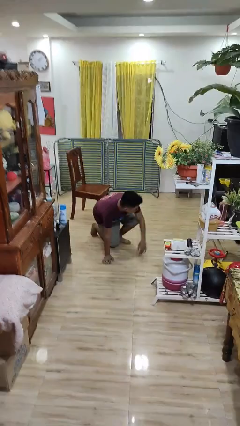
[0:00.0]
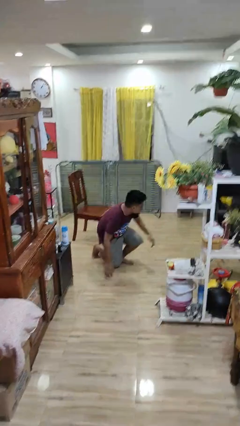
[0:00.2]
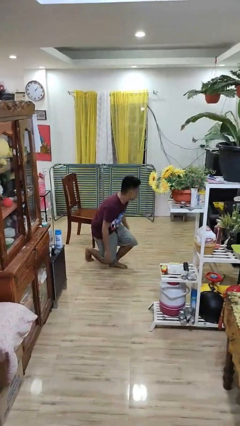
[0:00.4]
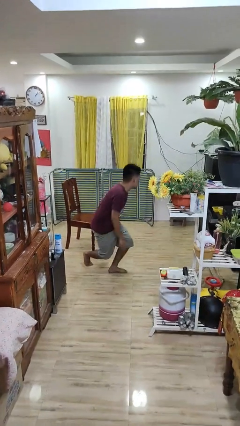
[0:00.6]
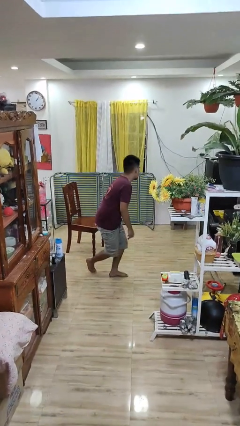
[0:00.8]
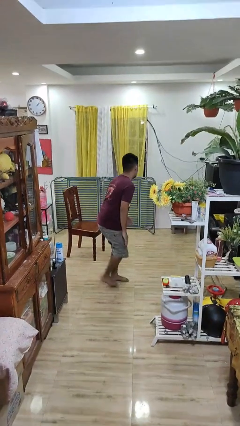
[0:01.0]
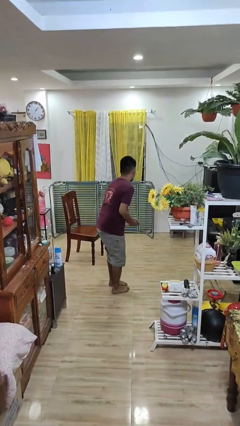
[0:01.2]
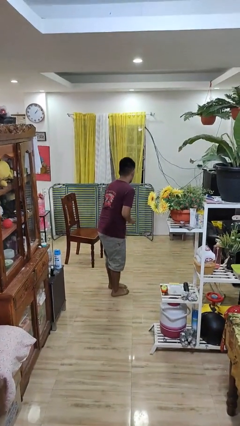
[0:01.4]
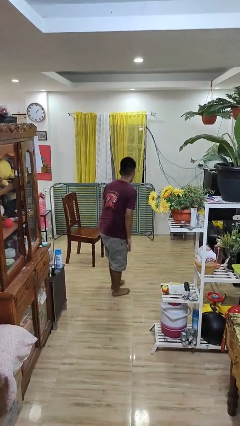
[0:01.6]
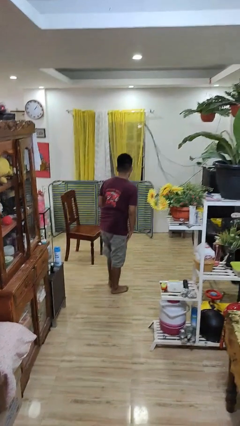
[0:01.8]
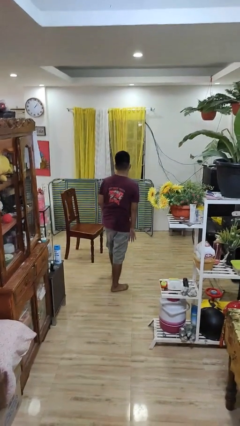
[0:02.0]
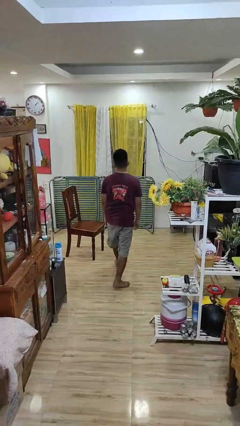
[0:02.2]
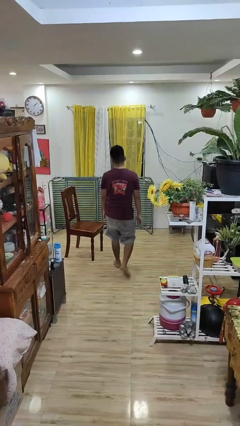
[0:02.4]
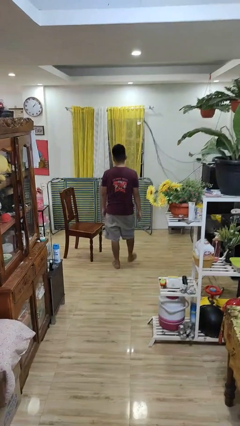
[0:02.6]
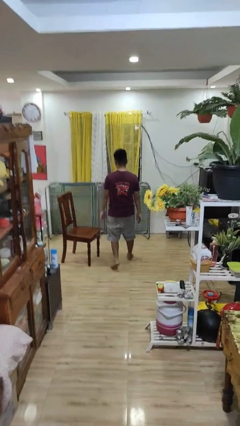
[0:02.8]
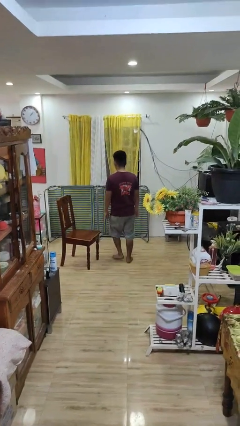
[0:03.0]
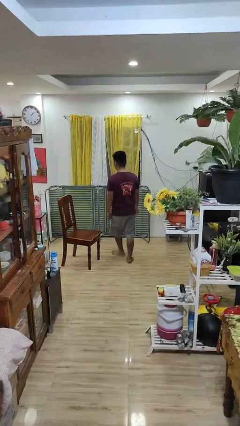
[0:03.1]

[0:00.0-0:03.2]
person stands up from floor

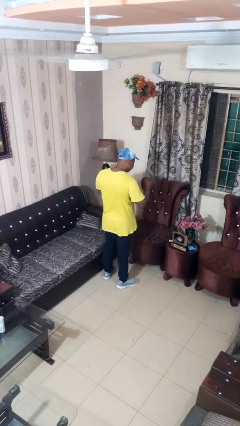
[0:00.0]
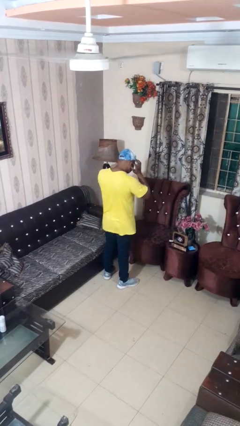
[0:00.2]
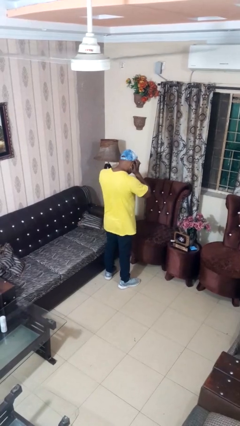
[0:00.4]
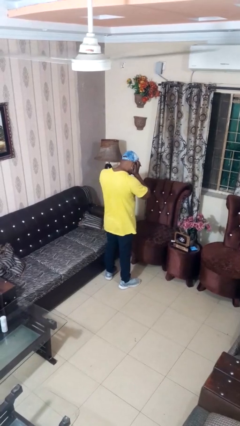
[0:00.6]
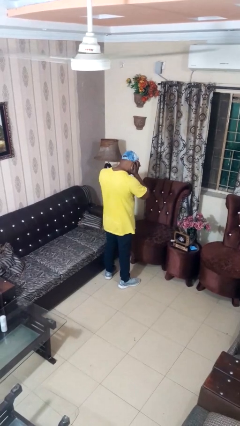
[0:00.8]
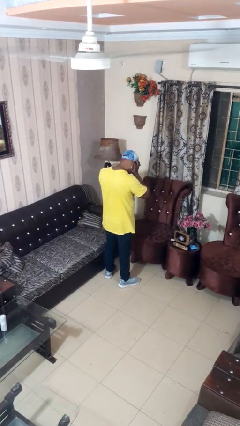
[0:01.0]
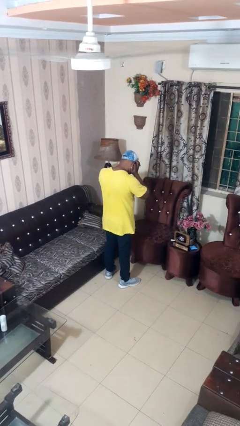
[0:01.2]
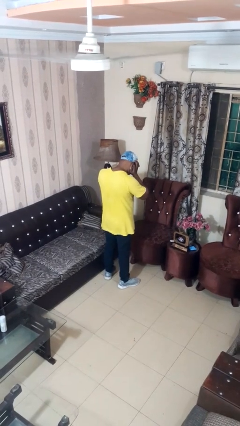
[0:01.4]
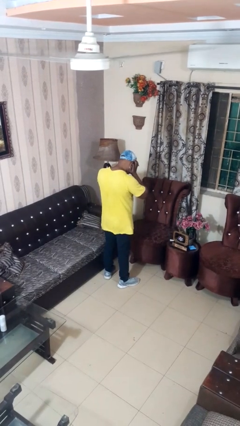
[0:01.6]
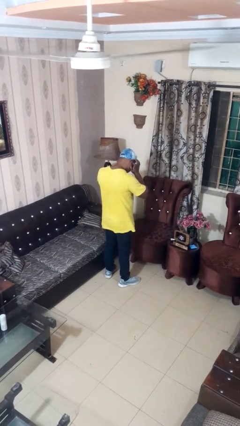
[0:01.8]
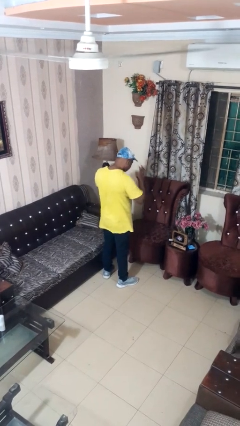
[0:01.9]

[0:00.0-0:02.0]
person puts fingers in ear

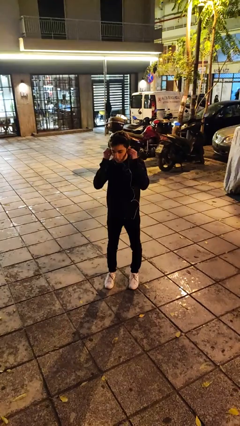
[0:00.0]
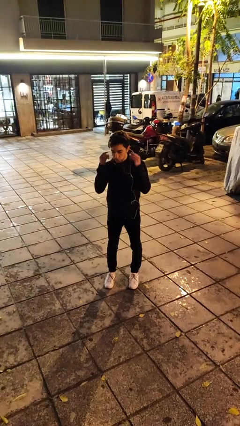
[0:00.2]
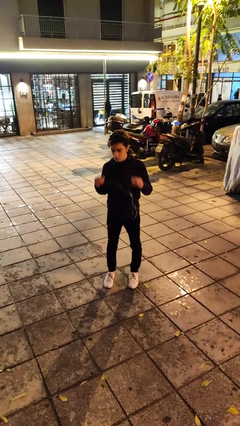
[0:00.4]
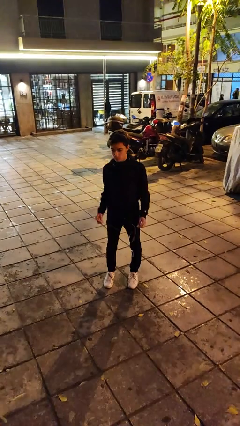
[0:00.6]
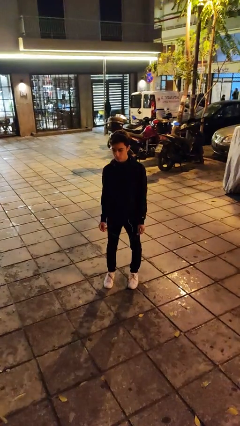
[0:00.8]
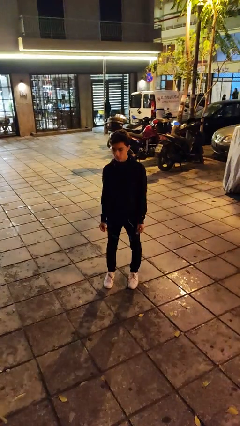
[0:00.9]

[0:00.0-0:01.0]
person takes off headphones

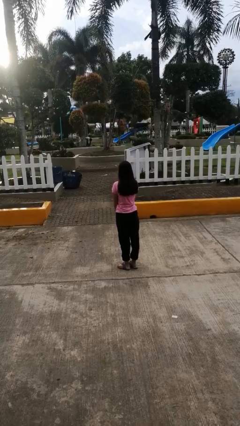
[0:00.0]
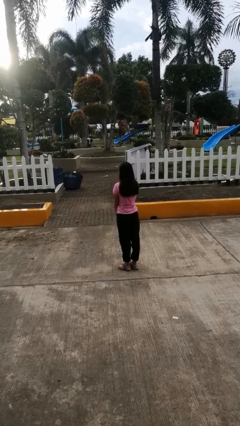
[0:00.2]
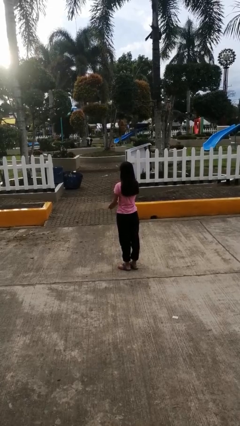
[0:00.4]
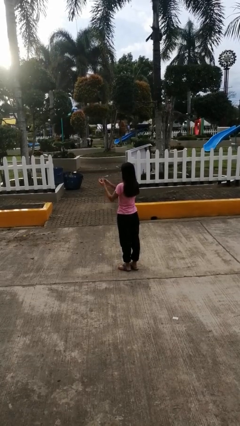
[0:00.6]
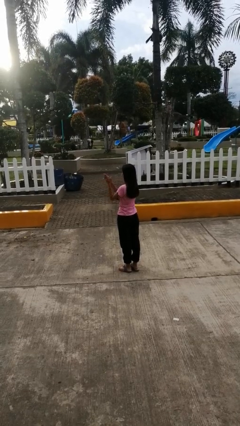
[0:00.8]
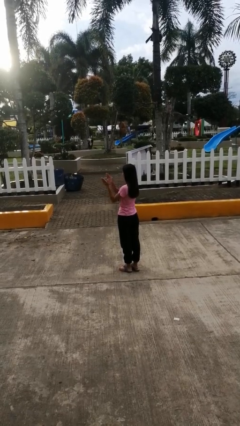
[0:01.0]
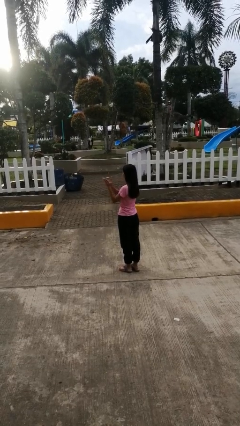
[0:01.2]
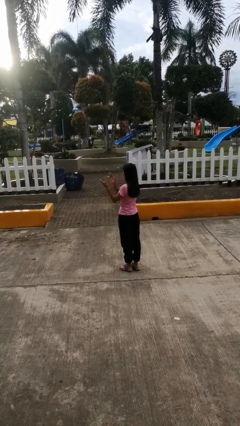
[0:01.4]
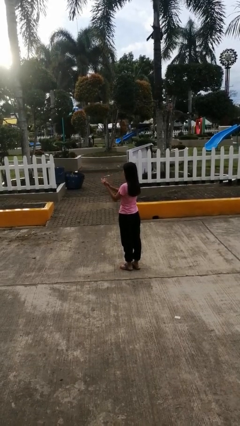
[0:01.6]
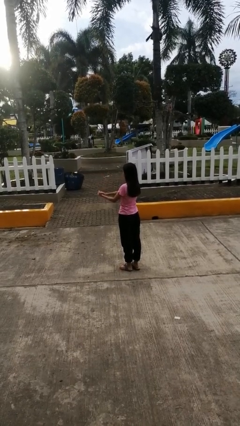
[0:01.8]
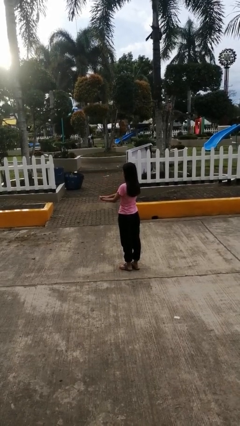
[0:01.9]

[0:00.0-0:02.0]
person claps hands

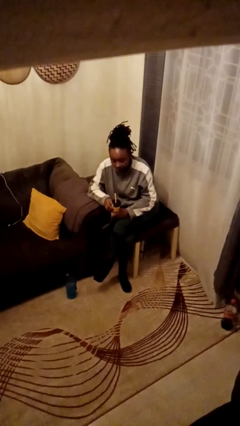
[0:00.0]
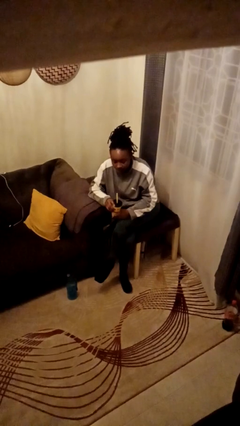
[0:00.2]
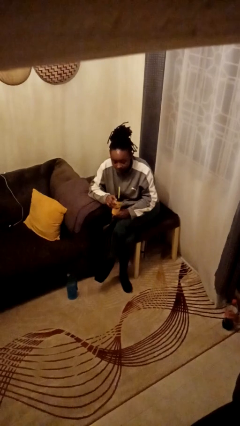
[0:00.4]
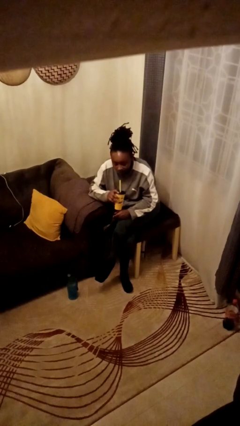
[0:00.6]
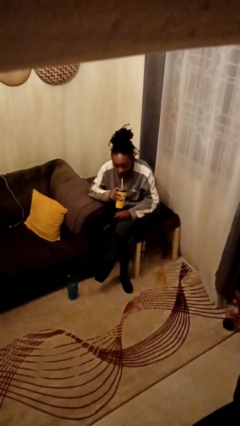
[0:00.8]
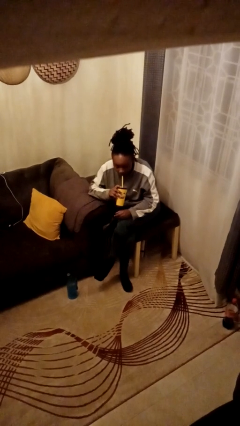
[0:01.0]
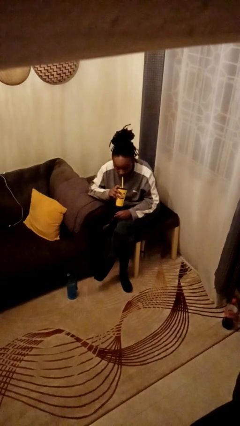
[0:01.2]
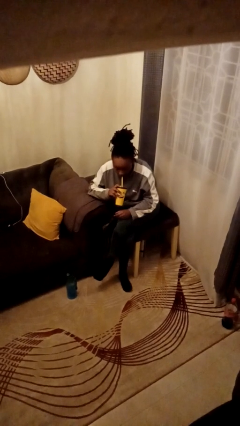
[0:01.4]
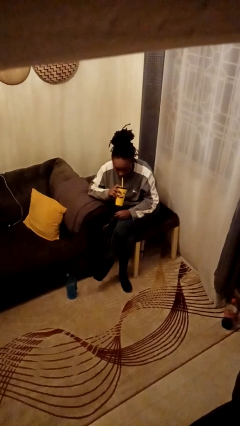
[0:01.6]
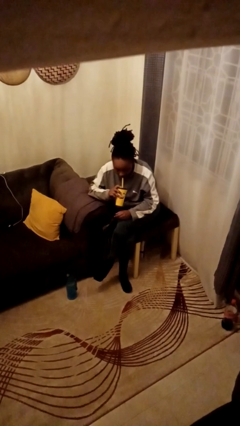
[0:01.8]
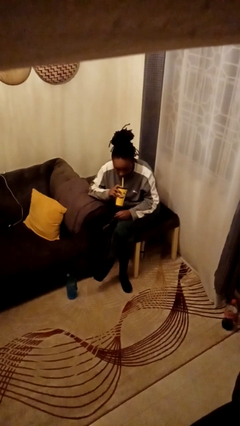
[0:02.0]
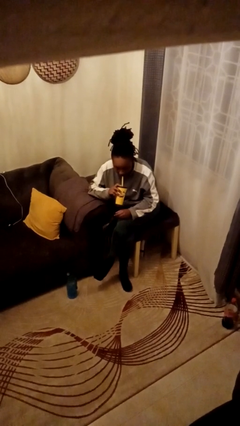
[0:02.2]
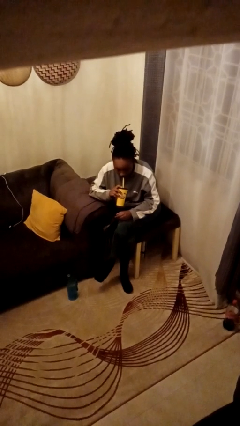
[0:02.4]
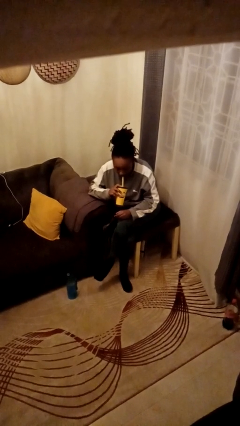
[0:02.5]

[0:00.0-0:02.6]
person drinks from straw

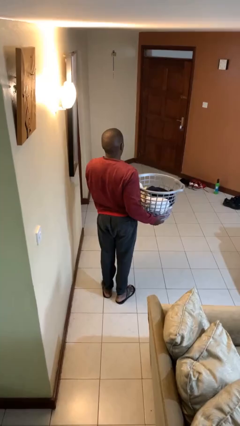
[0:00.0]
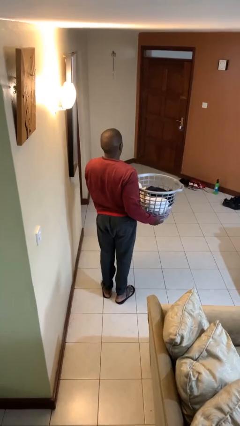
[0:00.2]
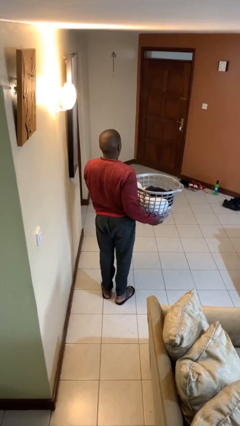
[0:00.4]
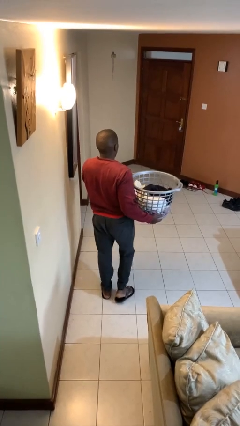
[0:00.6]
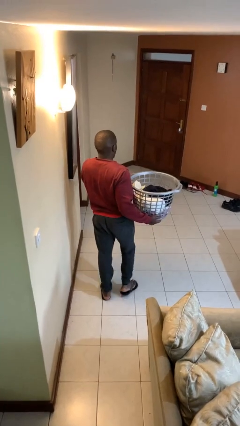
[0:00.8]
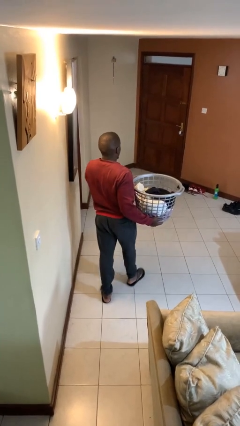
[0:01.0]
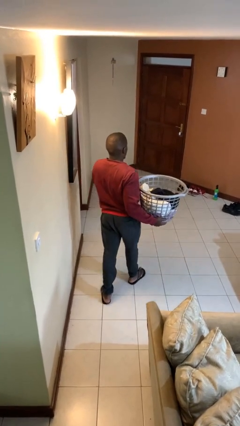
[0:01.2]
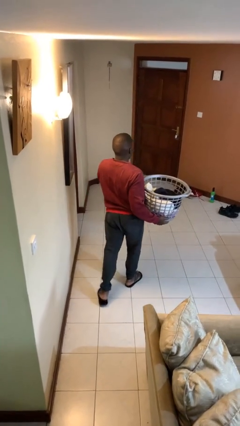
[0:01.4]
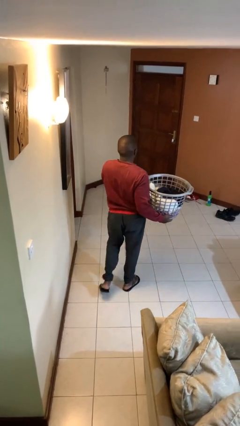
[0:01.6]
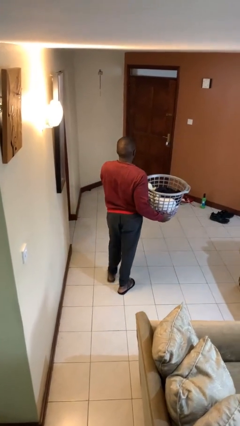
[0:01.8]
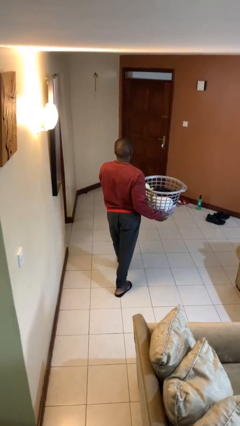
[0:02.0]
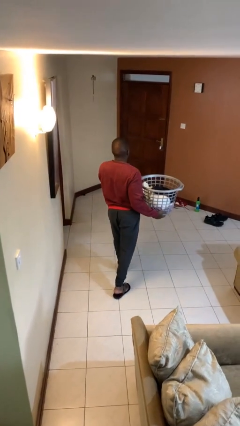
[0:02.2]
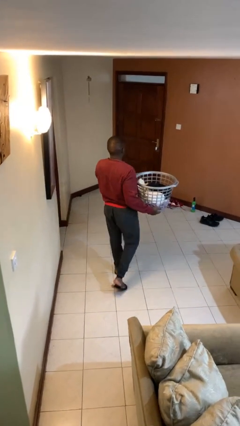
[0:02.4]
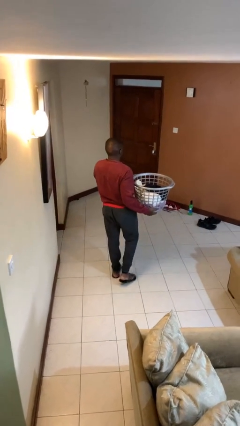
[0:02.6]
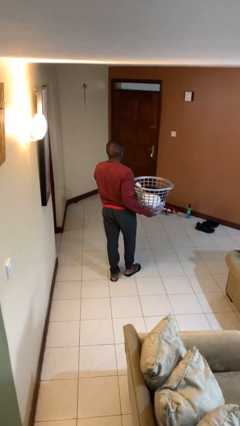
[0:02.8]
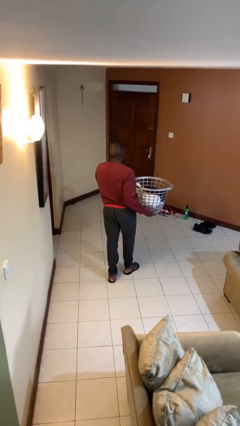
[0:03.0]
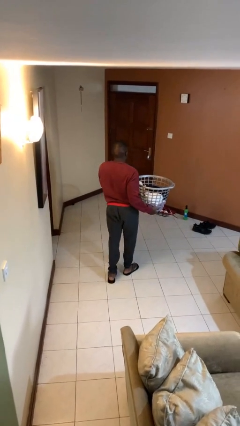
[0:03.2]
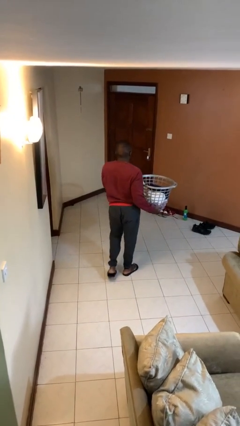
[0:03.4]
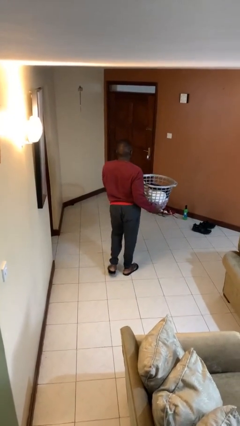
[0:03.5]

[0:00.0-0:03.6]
person carries laundry basket

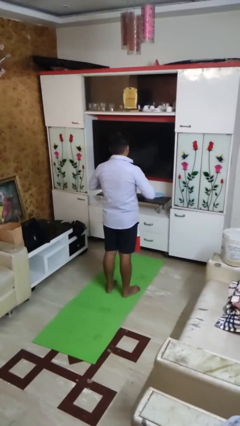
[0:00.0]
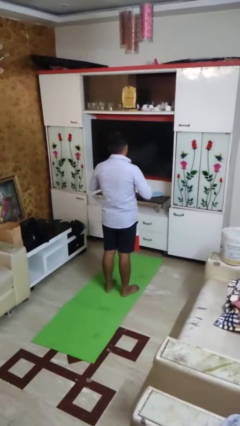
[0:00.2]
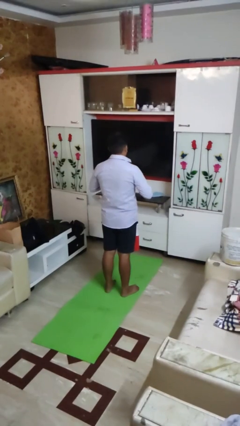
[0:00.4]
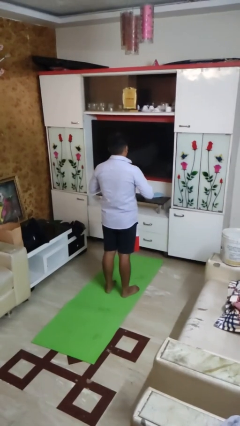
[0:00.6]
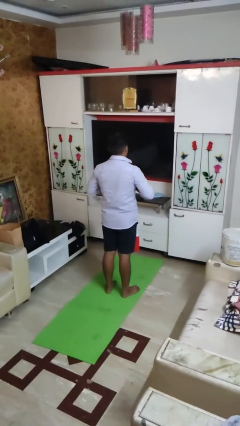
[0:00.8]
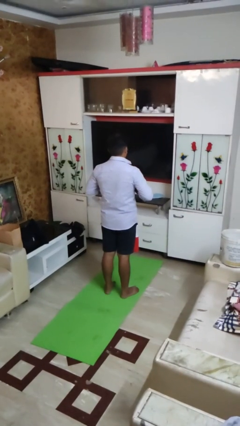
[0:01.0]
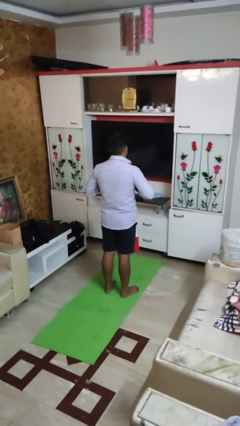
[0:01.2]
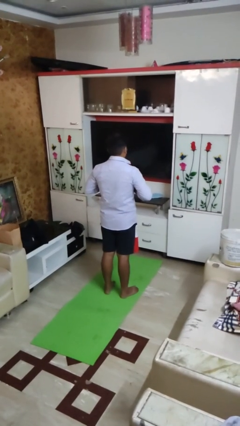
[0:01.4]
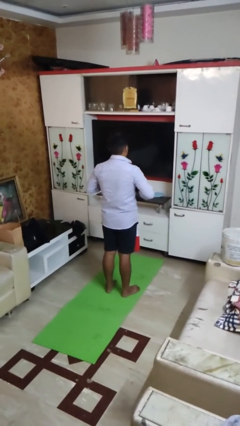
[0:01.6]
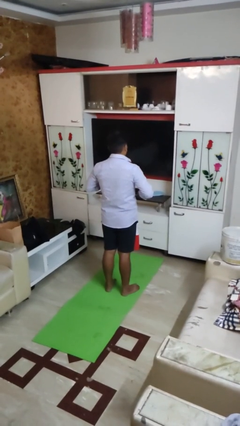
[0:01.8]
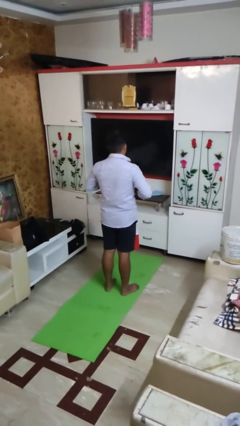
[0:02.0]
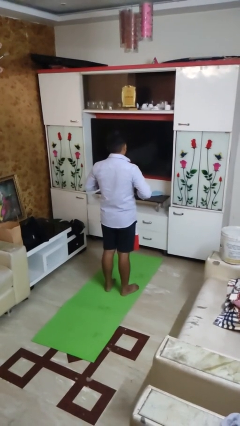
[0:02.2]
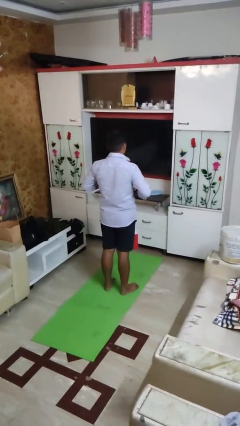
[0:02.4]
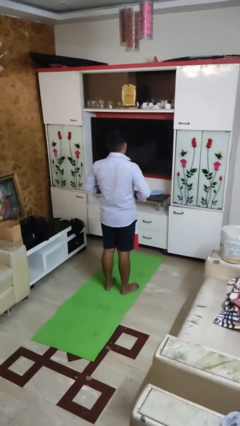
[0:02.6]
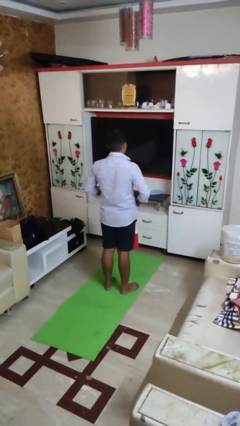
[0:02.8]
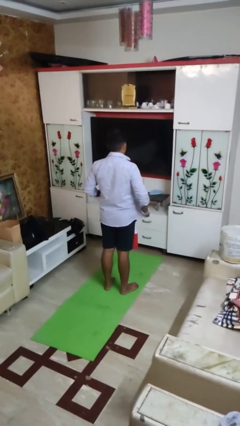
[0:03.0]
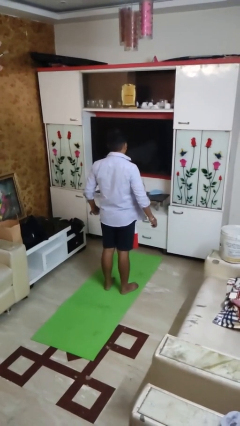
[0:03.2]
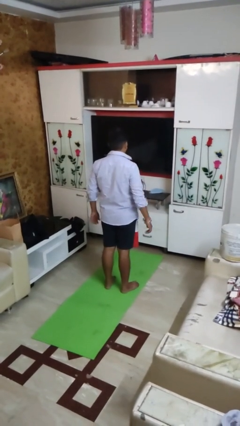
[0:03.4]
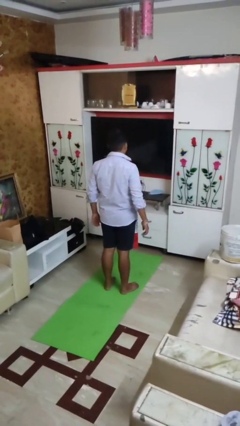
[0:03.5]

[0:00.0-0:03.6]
person unbuttons shirt
